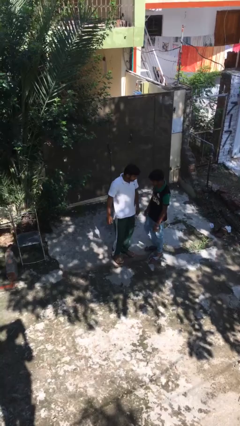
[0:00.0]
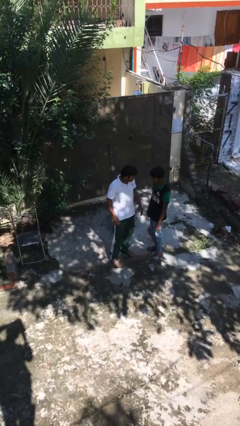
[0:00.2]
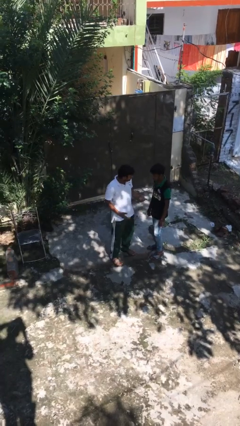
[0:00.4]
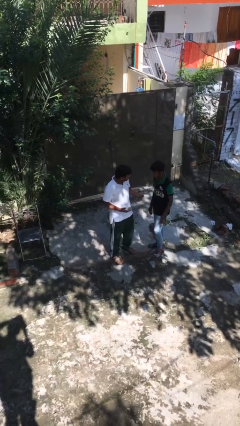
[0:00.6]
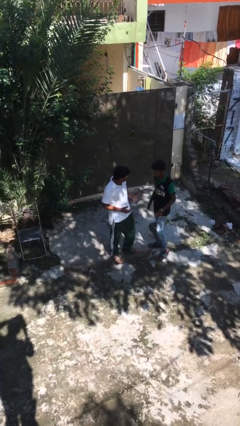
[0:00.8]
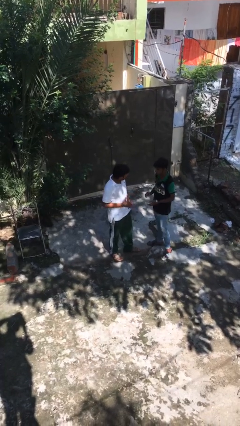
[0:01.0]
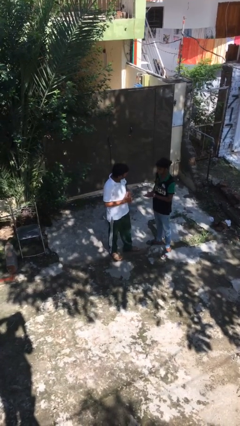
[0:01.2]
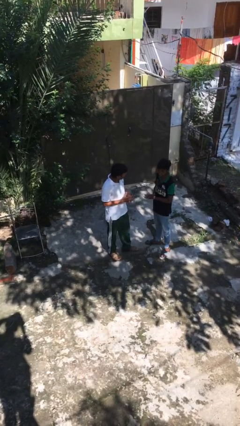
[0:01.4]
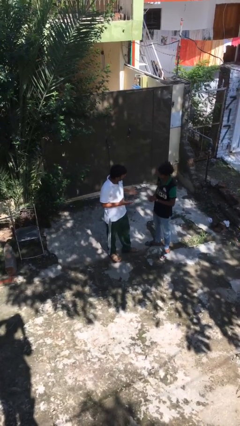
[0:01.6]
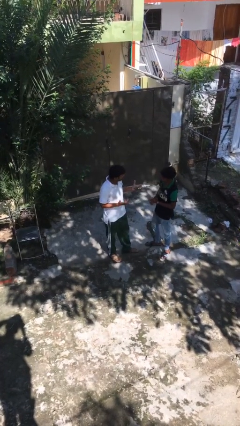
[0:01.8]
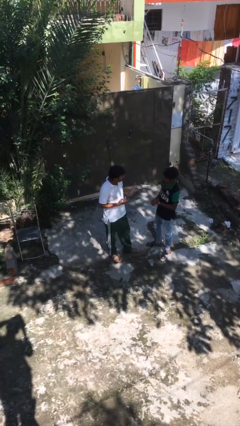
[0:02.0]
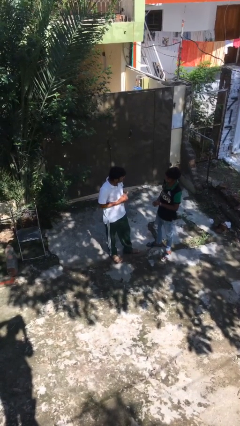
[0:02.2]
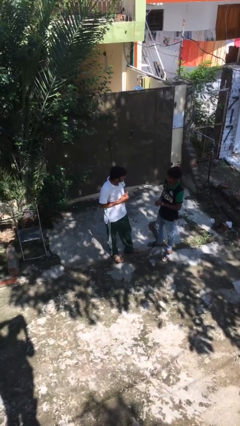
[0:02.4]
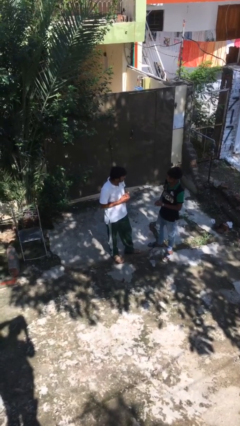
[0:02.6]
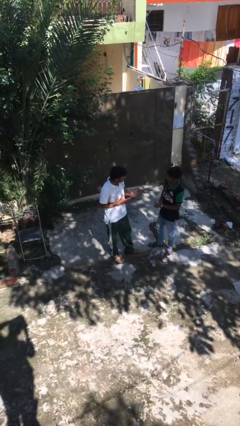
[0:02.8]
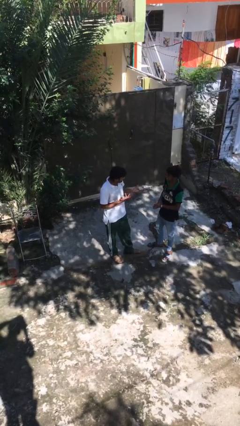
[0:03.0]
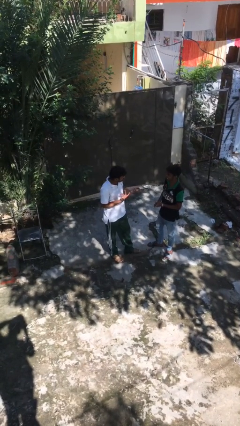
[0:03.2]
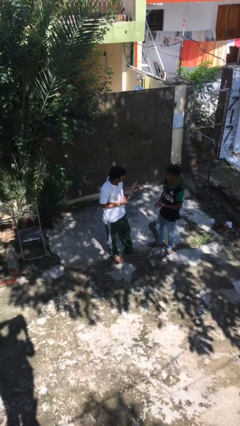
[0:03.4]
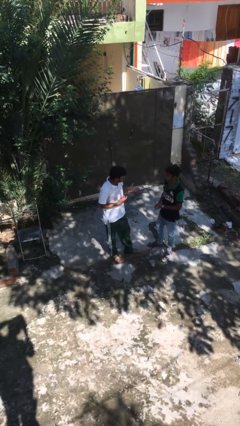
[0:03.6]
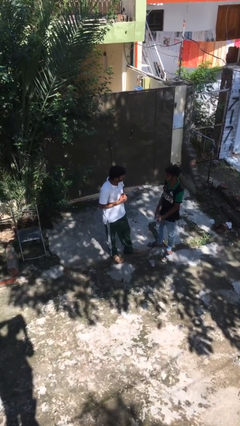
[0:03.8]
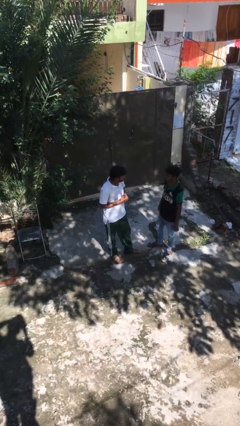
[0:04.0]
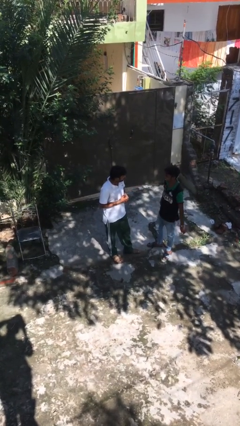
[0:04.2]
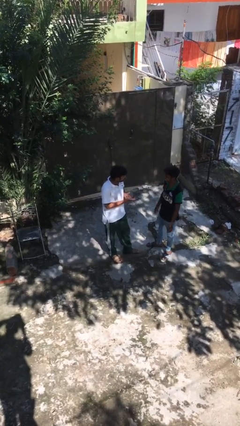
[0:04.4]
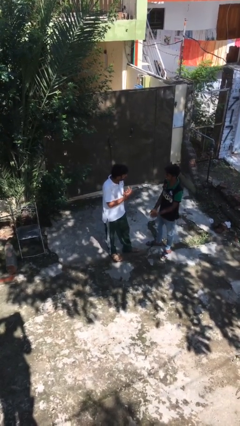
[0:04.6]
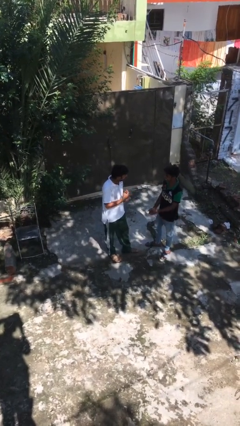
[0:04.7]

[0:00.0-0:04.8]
person talks to person

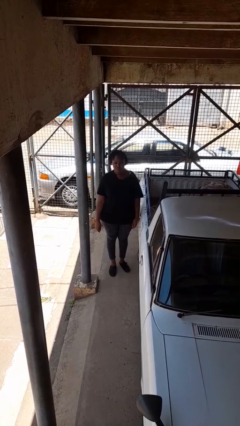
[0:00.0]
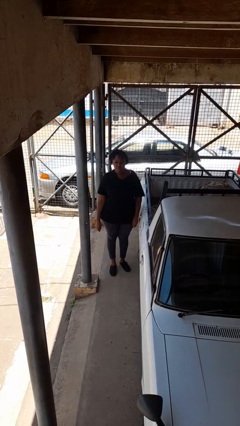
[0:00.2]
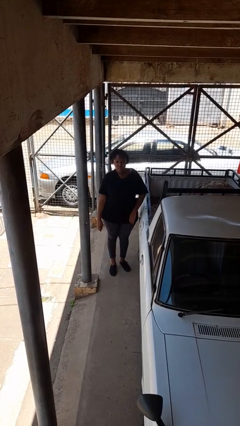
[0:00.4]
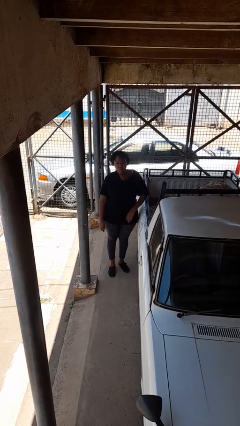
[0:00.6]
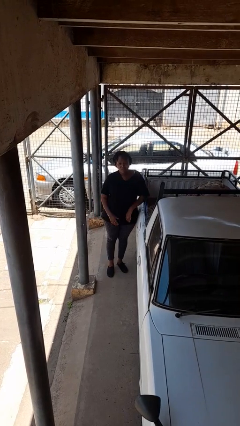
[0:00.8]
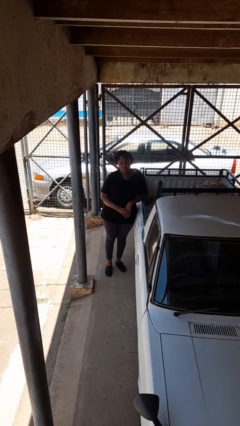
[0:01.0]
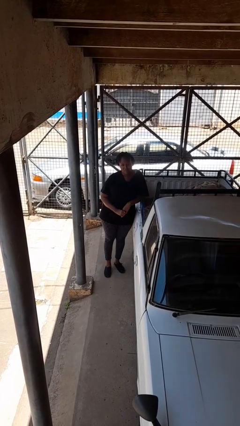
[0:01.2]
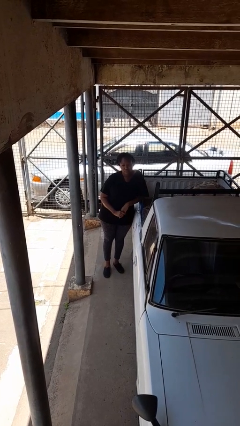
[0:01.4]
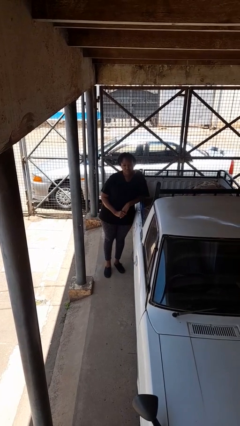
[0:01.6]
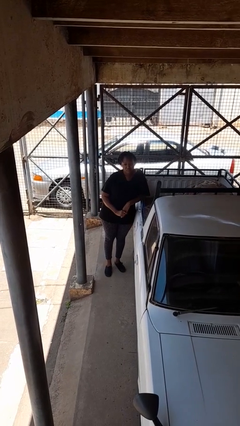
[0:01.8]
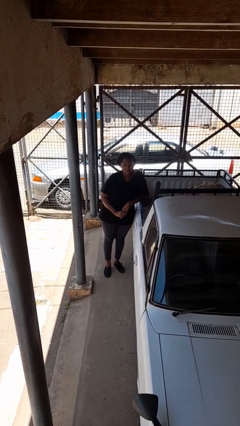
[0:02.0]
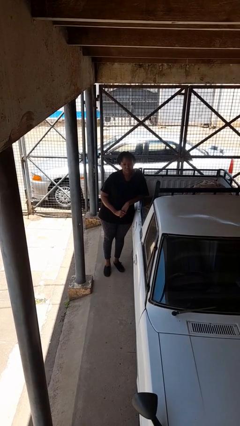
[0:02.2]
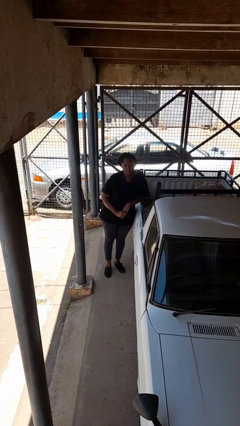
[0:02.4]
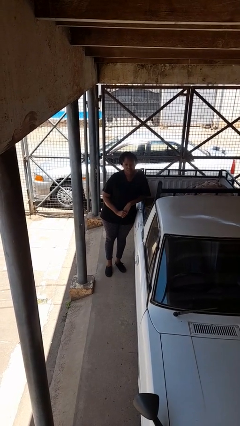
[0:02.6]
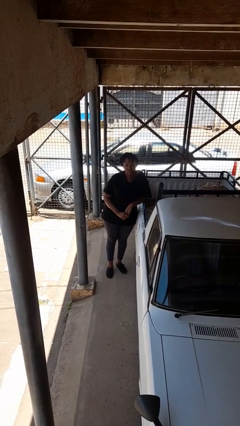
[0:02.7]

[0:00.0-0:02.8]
person leans against car

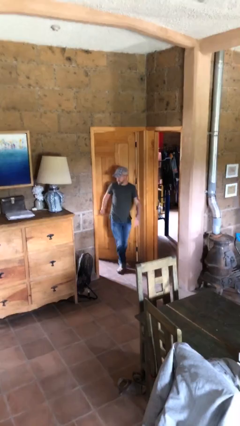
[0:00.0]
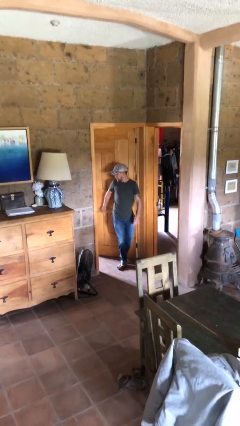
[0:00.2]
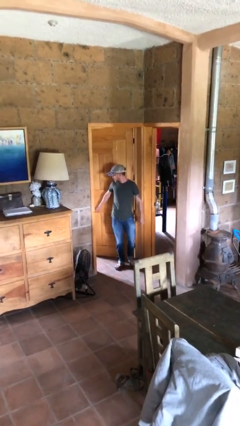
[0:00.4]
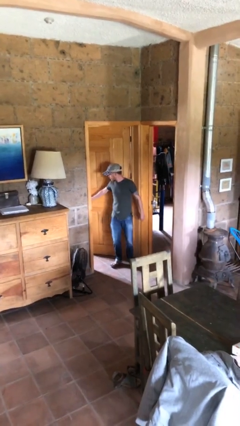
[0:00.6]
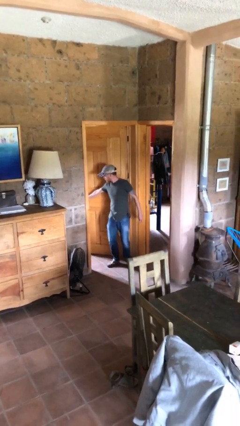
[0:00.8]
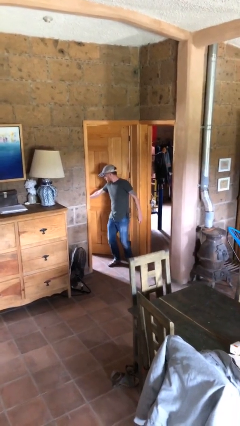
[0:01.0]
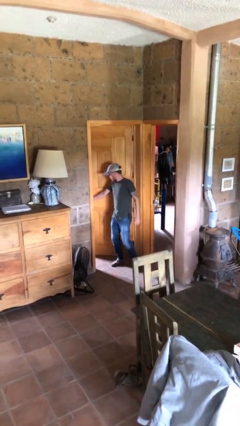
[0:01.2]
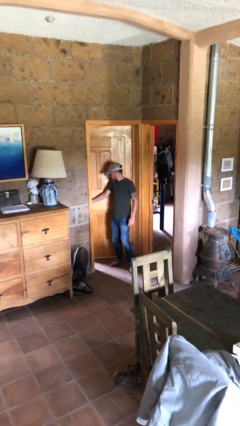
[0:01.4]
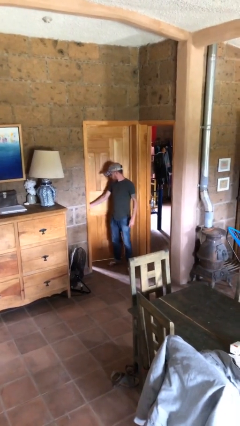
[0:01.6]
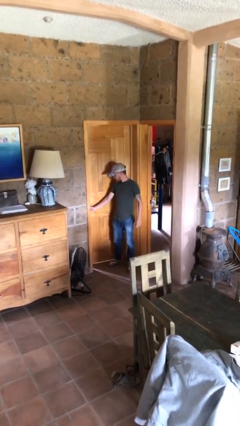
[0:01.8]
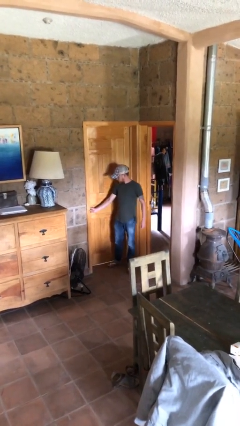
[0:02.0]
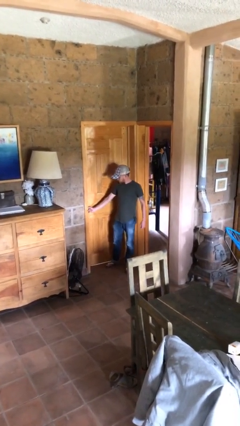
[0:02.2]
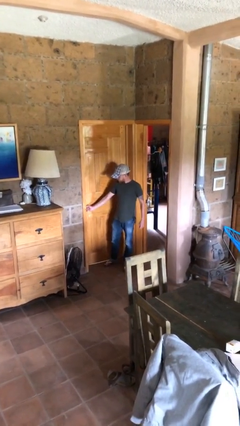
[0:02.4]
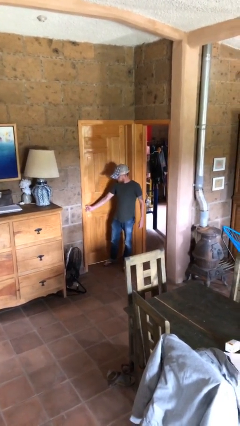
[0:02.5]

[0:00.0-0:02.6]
person closes facility door

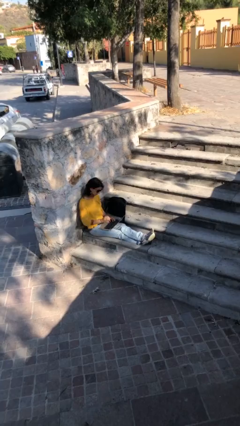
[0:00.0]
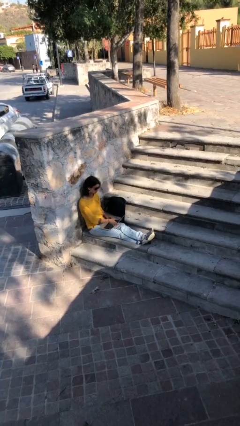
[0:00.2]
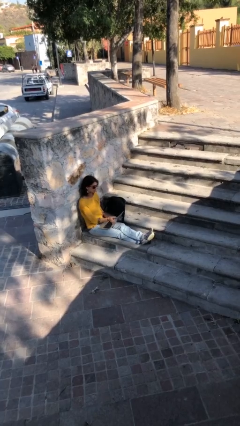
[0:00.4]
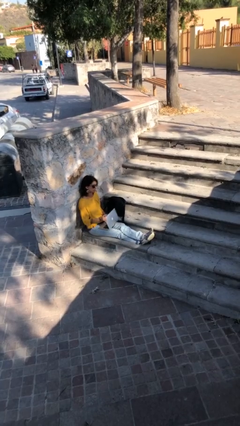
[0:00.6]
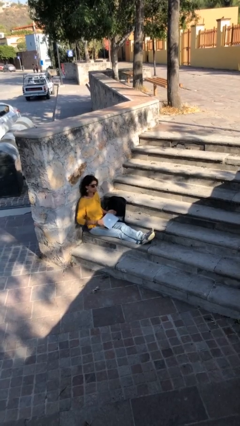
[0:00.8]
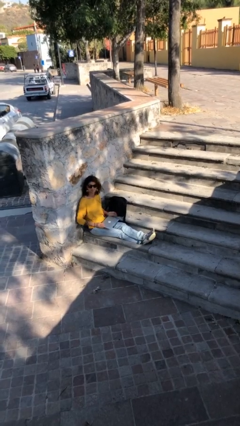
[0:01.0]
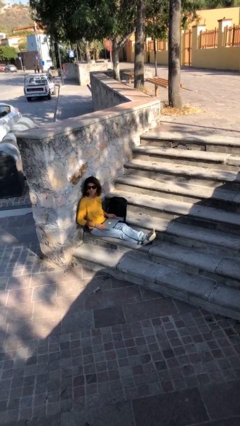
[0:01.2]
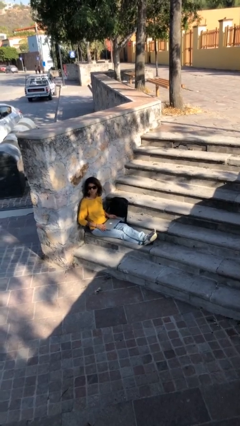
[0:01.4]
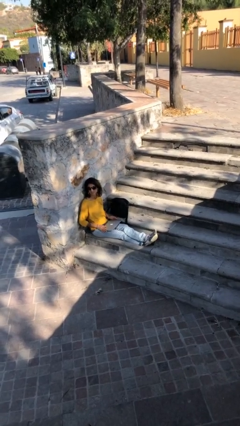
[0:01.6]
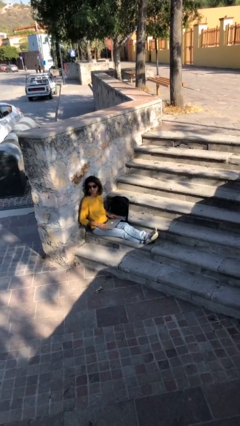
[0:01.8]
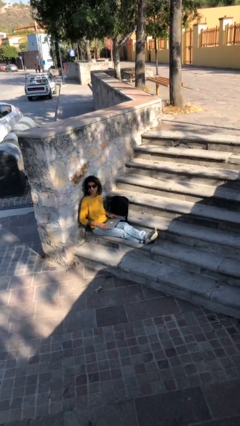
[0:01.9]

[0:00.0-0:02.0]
person interacts with laptop

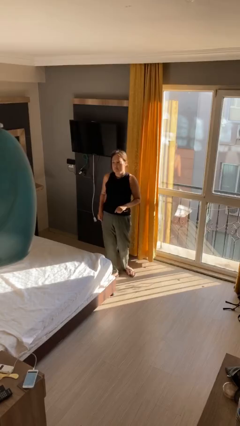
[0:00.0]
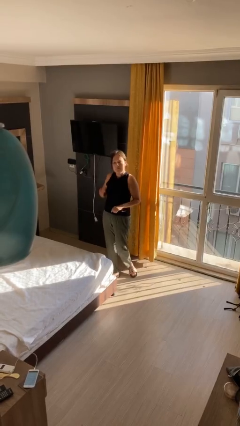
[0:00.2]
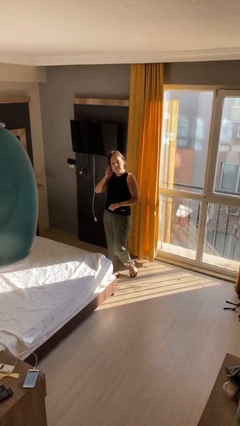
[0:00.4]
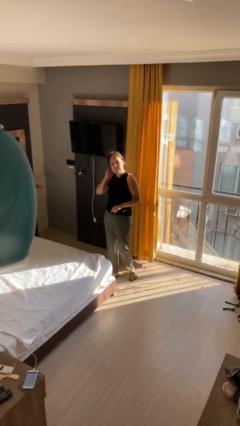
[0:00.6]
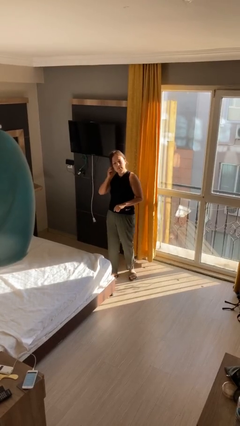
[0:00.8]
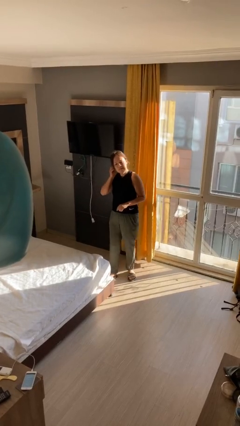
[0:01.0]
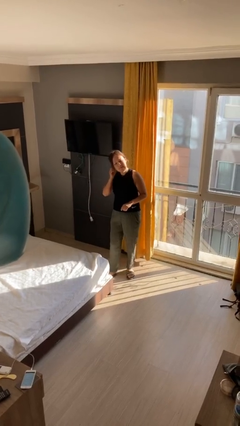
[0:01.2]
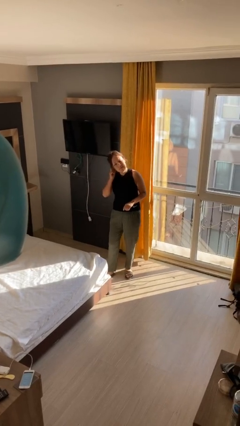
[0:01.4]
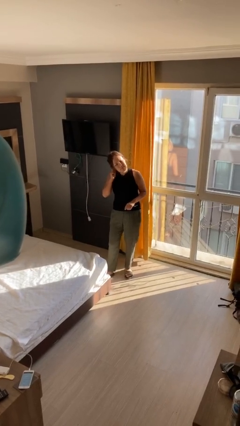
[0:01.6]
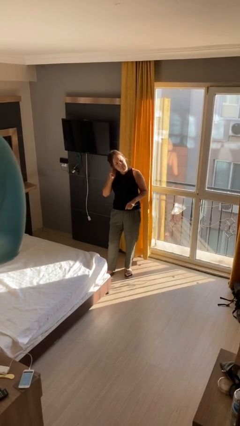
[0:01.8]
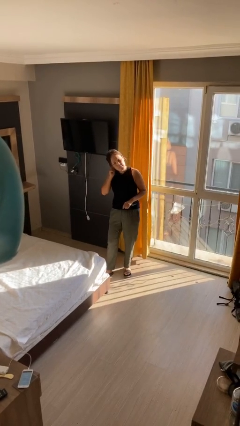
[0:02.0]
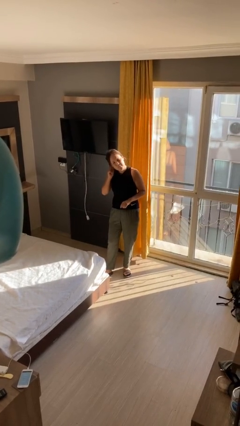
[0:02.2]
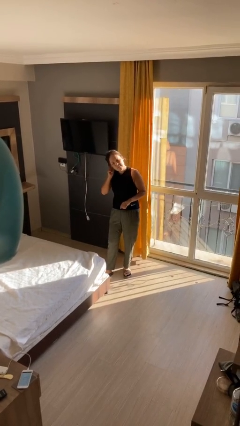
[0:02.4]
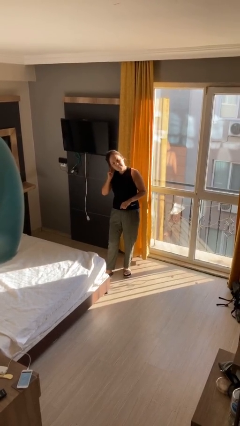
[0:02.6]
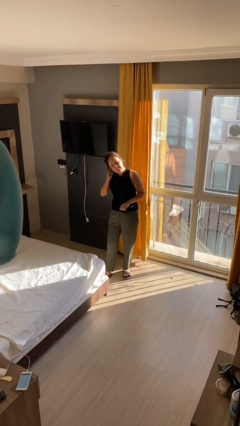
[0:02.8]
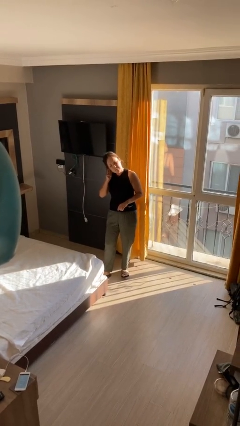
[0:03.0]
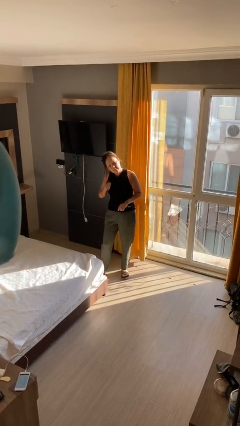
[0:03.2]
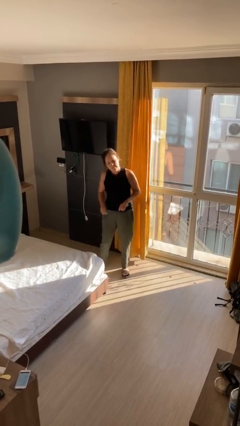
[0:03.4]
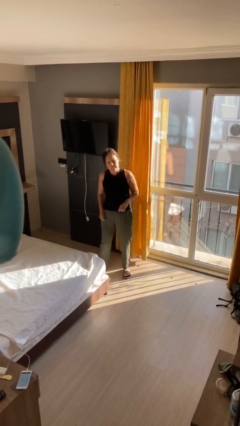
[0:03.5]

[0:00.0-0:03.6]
person touches earlobe

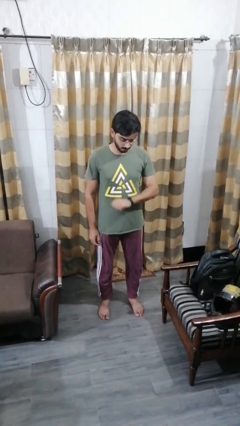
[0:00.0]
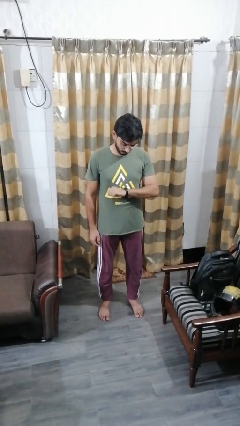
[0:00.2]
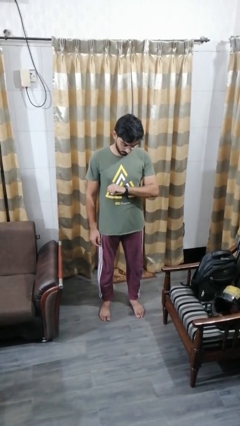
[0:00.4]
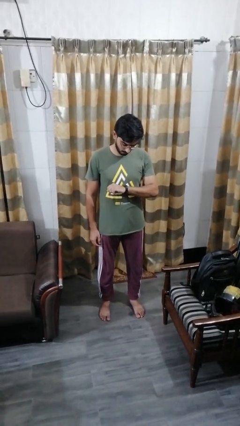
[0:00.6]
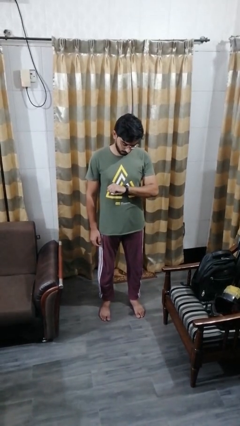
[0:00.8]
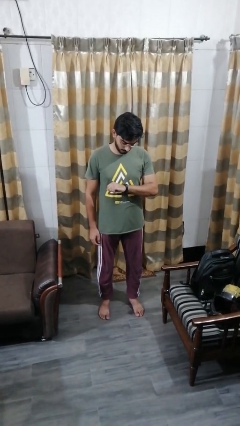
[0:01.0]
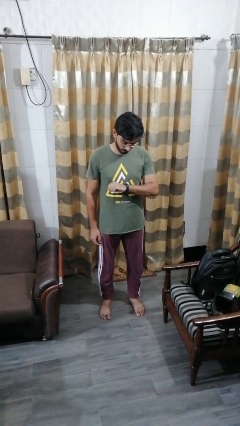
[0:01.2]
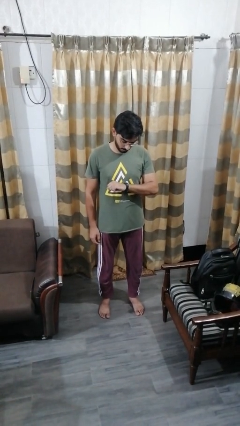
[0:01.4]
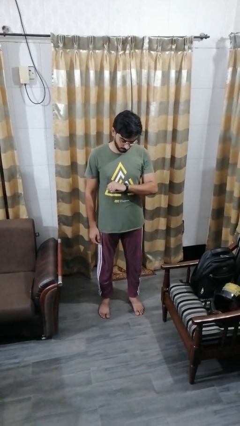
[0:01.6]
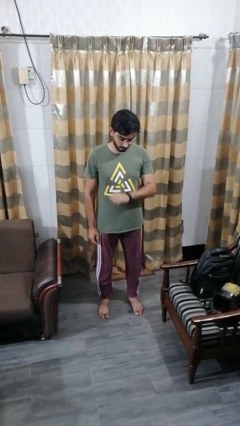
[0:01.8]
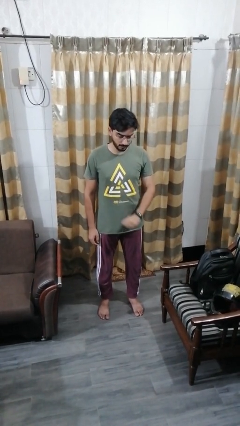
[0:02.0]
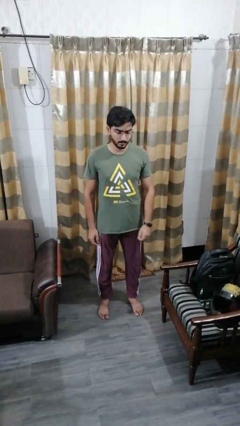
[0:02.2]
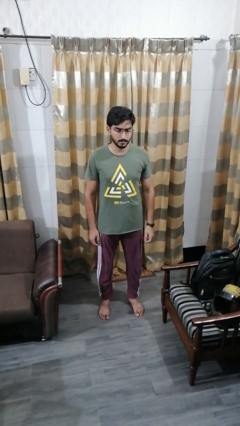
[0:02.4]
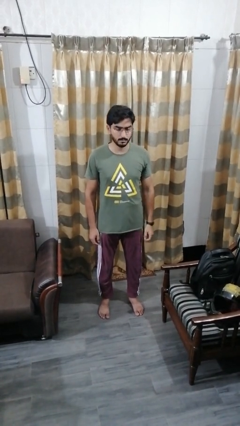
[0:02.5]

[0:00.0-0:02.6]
person looks at wristwatch
